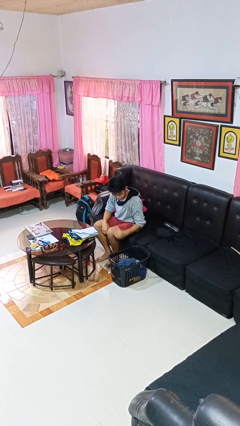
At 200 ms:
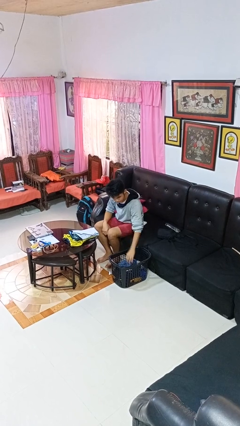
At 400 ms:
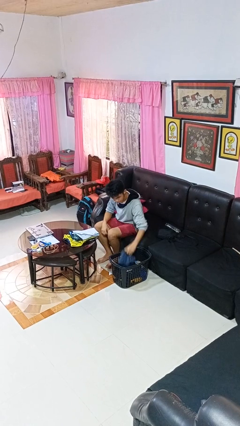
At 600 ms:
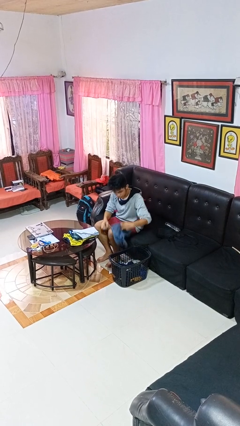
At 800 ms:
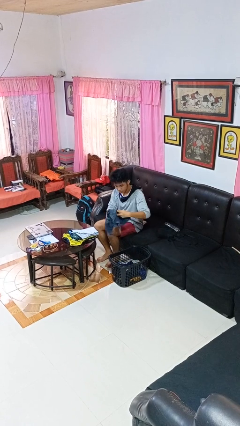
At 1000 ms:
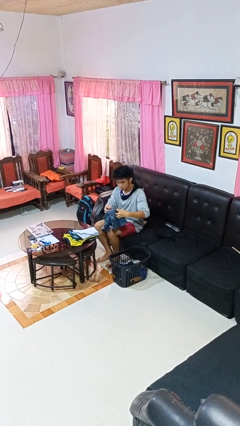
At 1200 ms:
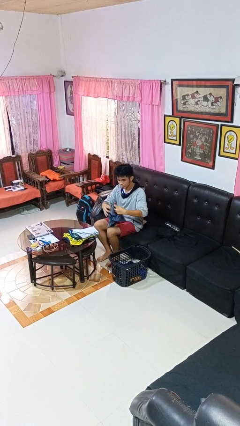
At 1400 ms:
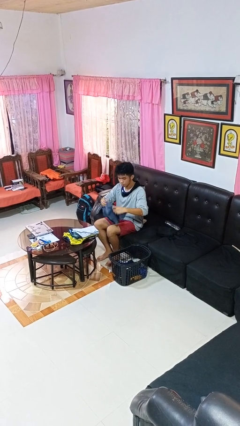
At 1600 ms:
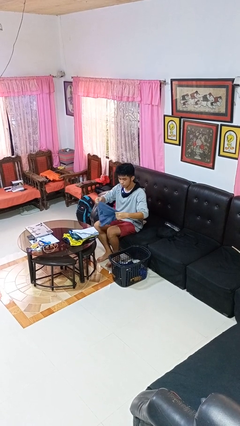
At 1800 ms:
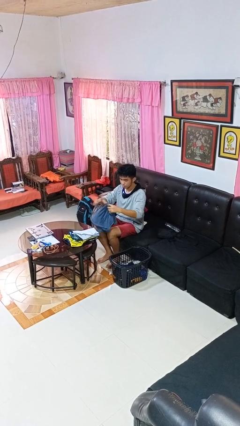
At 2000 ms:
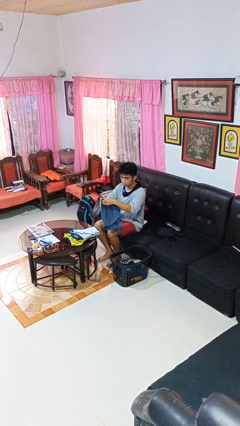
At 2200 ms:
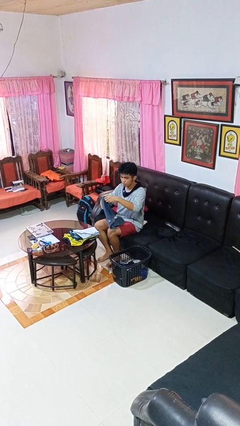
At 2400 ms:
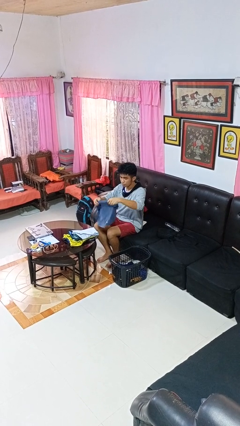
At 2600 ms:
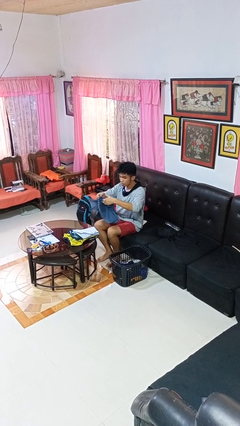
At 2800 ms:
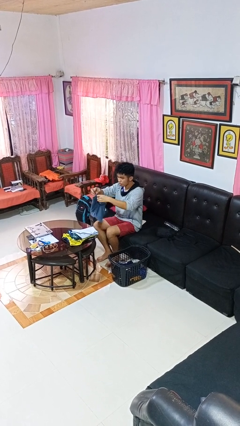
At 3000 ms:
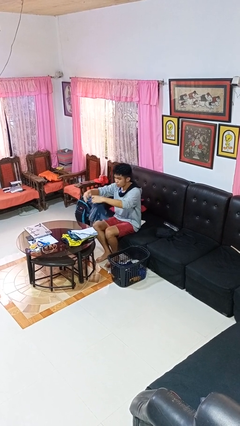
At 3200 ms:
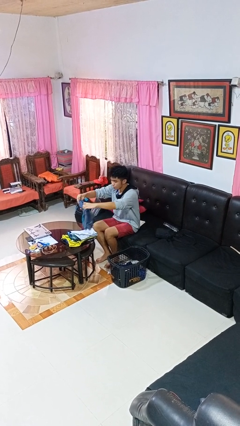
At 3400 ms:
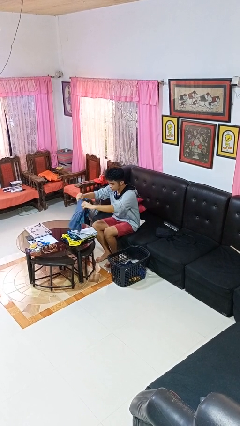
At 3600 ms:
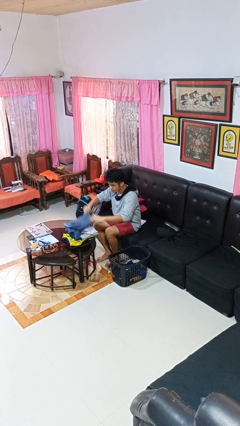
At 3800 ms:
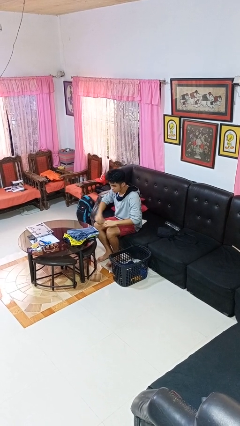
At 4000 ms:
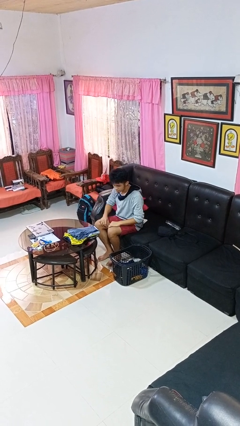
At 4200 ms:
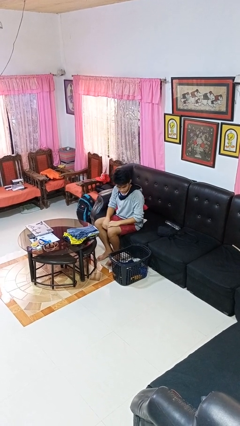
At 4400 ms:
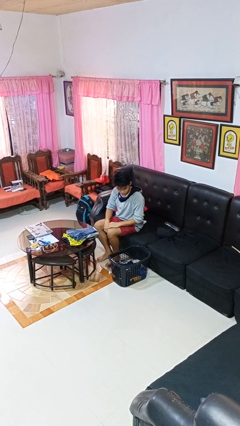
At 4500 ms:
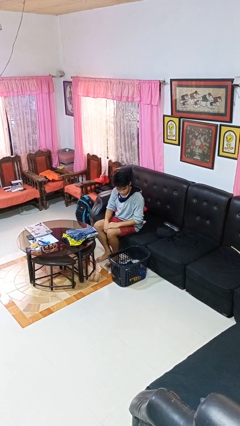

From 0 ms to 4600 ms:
person folds shirt

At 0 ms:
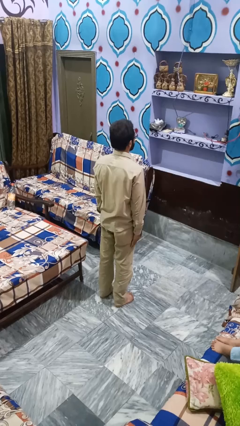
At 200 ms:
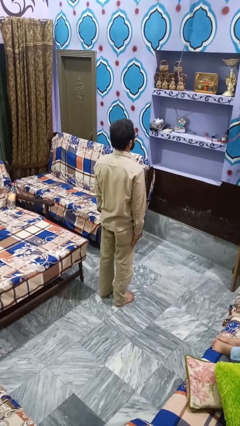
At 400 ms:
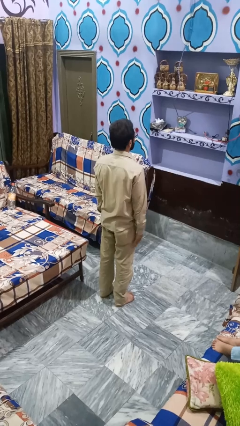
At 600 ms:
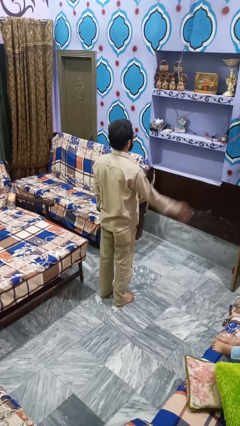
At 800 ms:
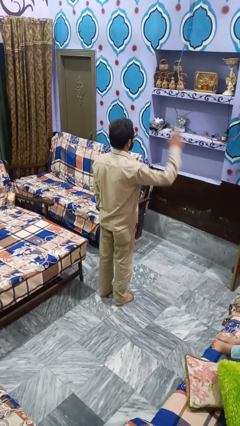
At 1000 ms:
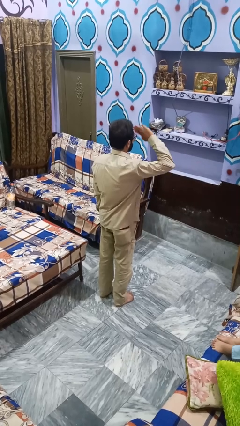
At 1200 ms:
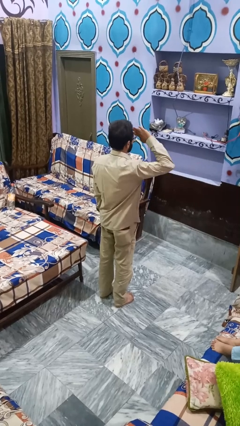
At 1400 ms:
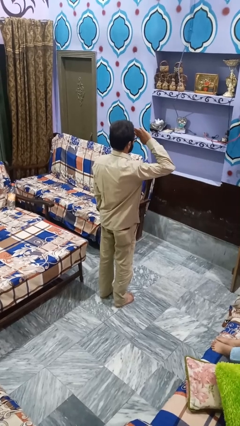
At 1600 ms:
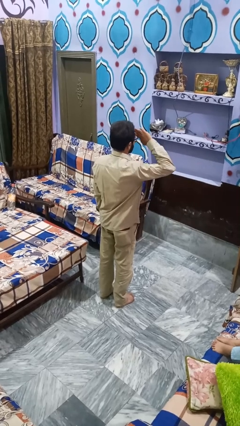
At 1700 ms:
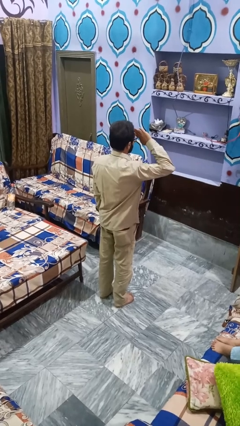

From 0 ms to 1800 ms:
person salutes

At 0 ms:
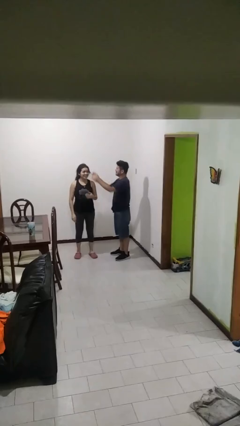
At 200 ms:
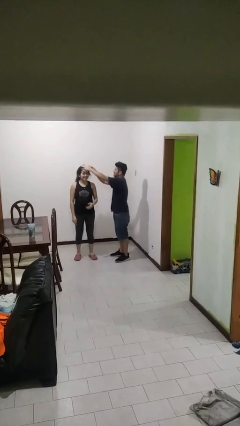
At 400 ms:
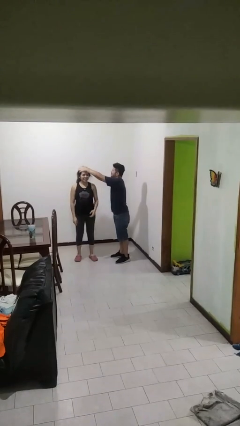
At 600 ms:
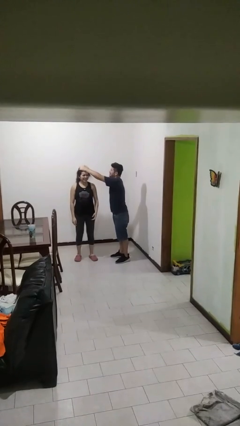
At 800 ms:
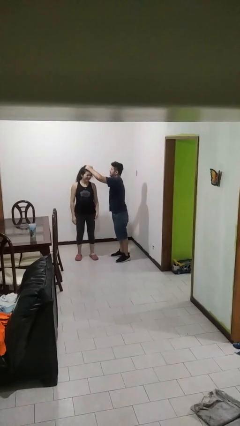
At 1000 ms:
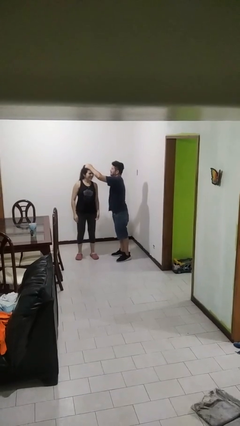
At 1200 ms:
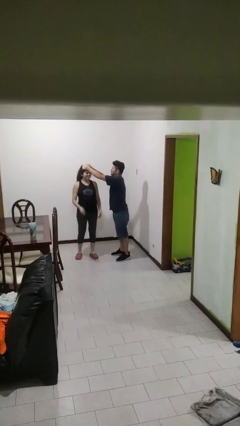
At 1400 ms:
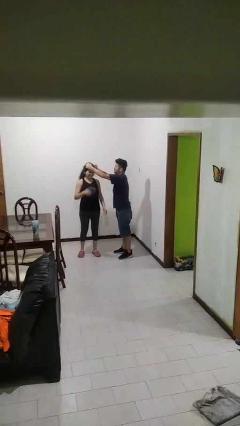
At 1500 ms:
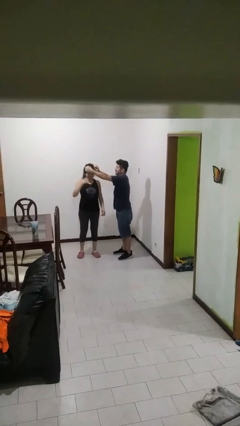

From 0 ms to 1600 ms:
person grabs person by hair

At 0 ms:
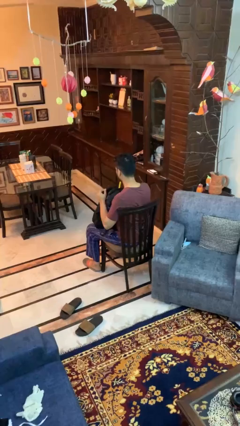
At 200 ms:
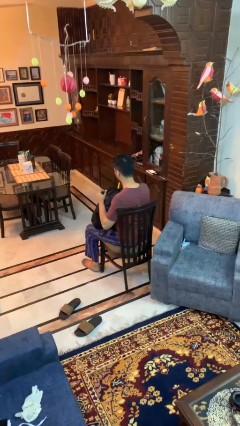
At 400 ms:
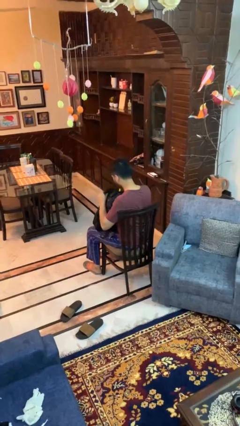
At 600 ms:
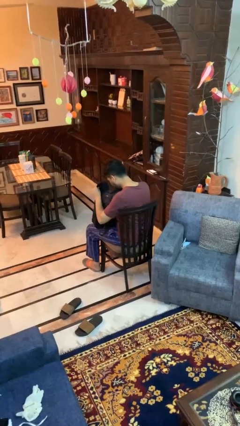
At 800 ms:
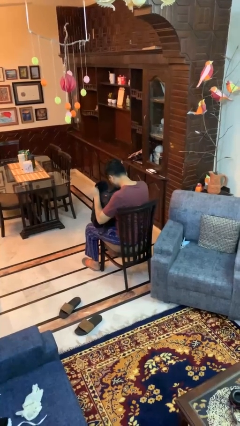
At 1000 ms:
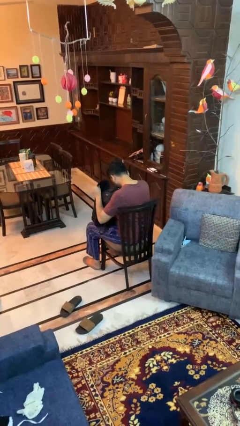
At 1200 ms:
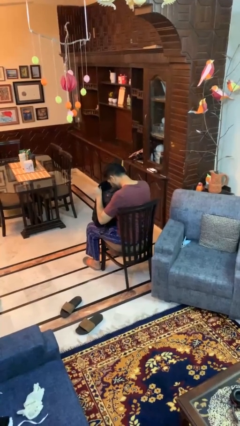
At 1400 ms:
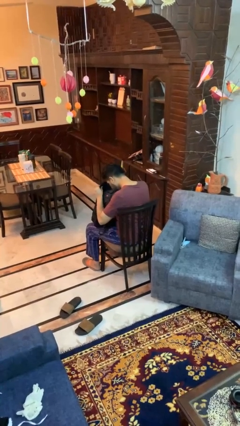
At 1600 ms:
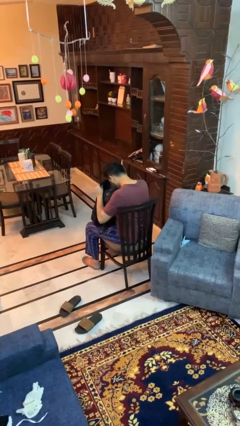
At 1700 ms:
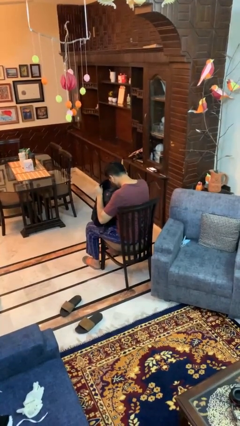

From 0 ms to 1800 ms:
person searches in backpack

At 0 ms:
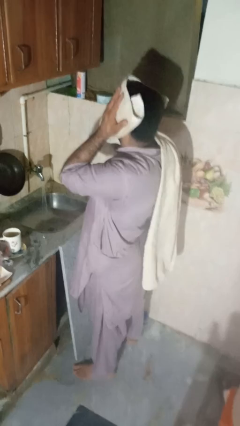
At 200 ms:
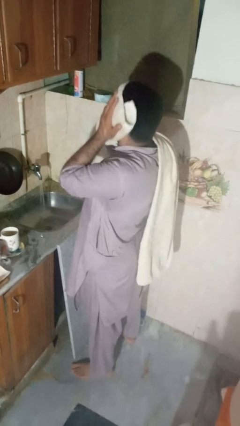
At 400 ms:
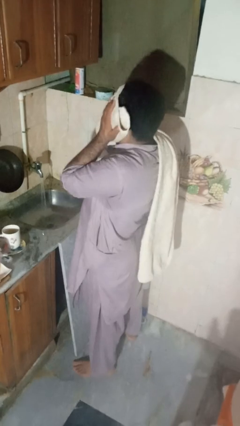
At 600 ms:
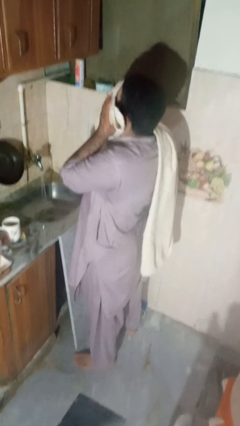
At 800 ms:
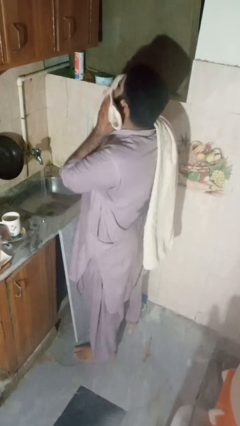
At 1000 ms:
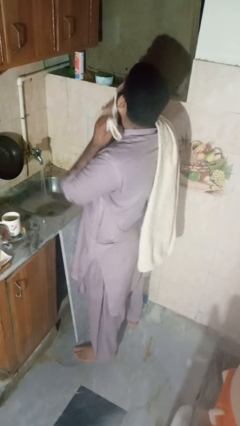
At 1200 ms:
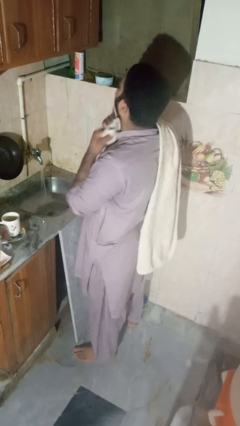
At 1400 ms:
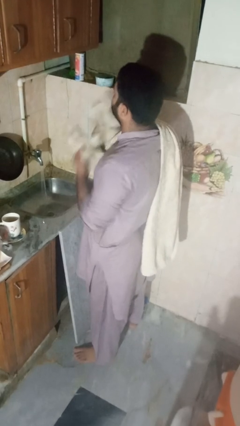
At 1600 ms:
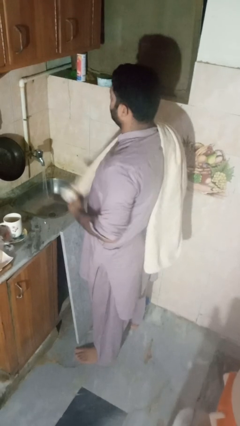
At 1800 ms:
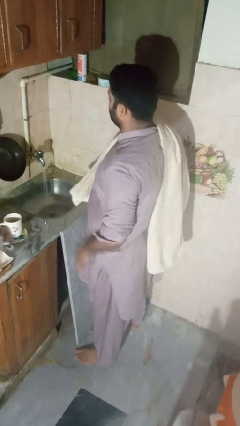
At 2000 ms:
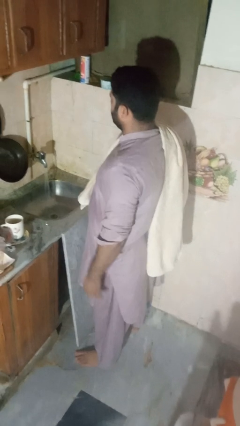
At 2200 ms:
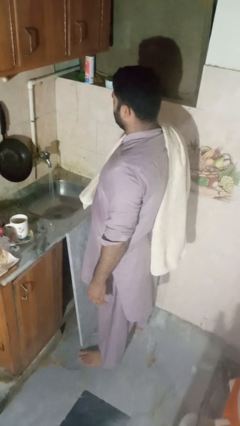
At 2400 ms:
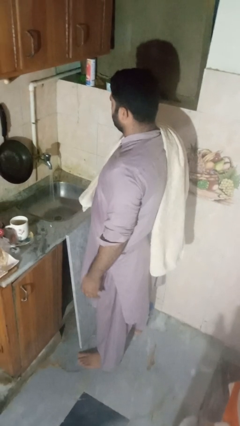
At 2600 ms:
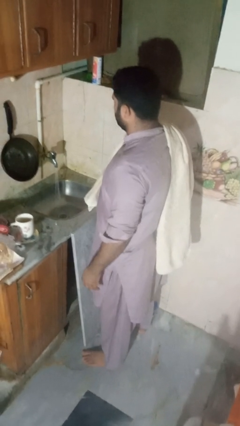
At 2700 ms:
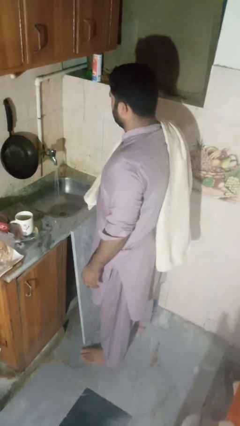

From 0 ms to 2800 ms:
person dries face with towel

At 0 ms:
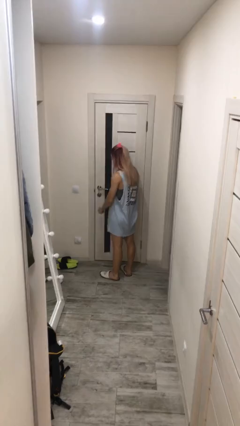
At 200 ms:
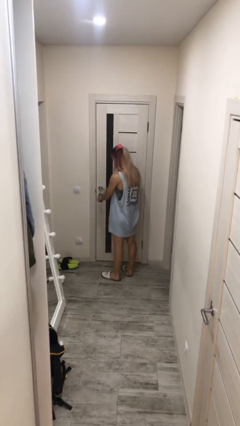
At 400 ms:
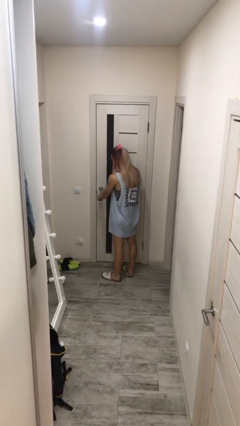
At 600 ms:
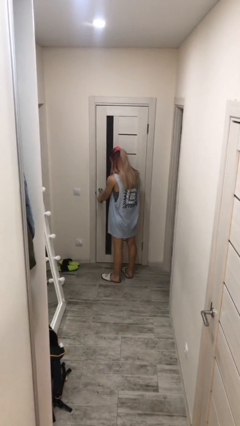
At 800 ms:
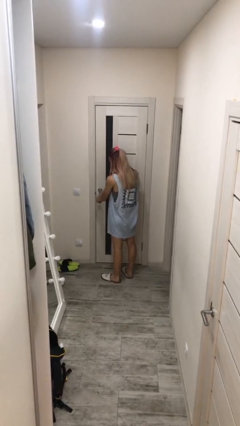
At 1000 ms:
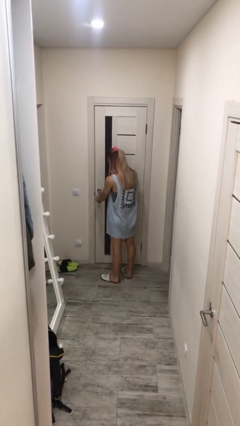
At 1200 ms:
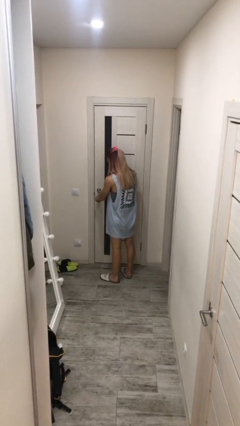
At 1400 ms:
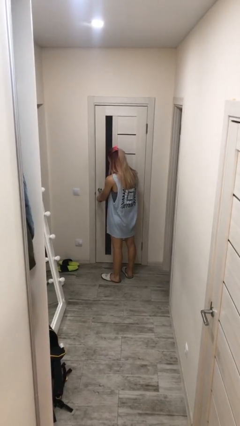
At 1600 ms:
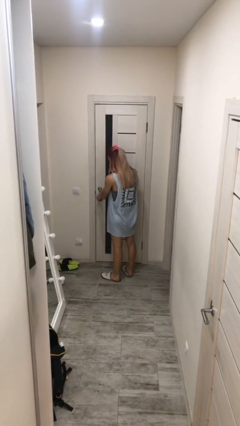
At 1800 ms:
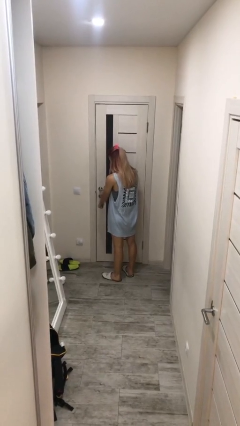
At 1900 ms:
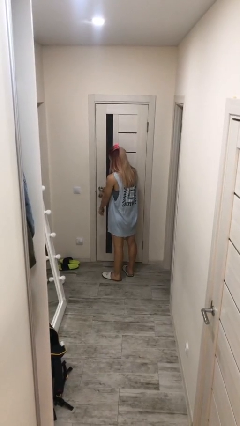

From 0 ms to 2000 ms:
person unlocks door with keys

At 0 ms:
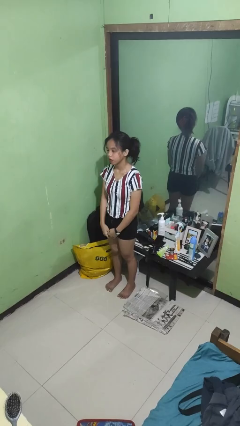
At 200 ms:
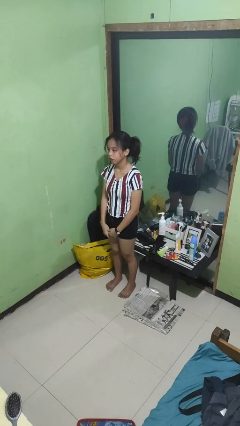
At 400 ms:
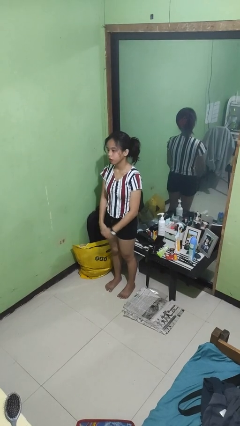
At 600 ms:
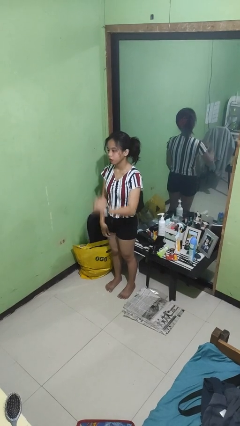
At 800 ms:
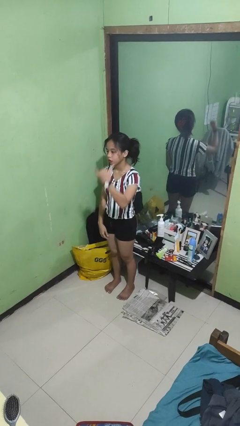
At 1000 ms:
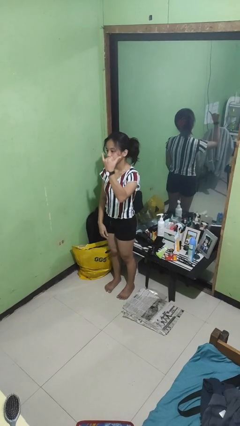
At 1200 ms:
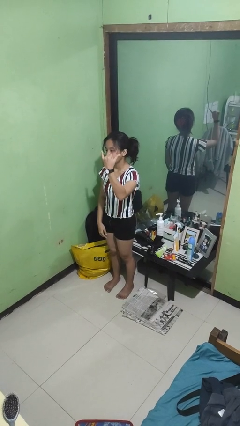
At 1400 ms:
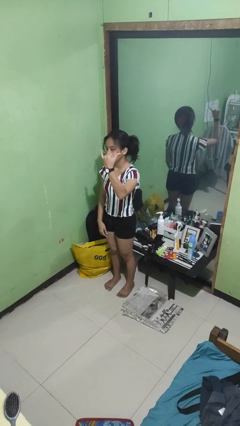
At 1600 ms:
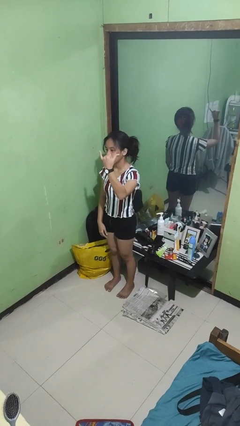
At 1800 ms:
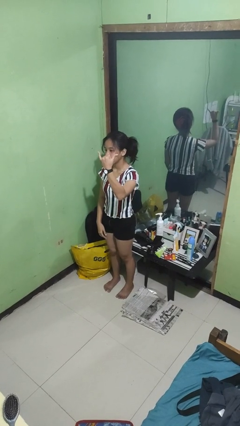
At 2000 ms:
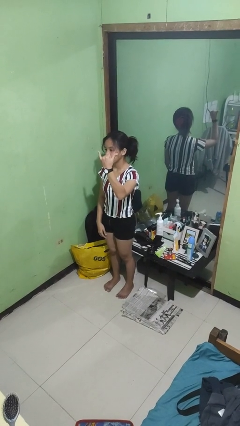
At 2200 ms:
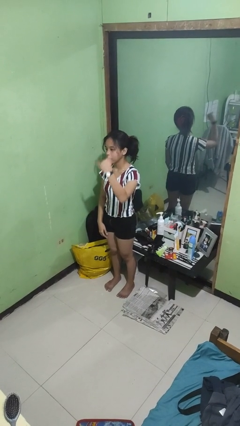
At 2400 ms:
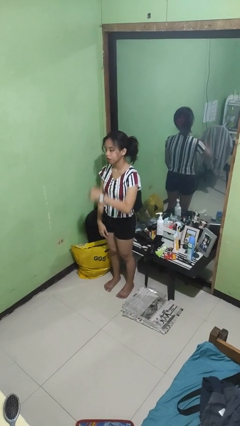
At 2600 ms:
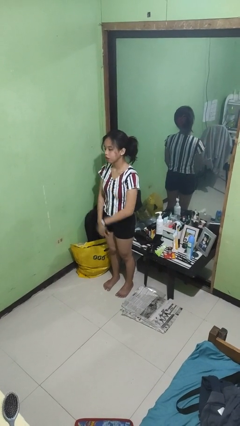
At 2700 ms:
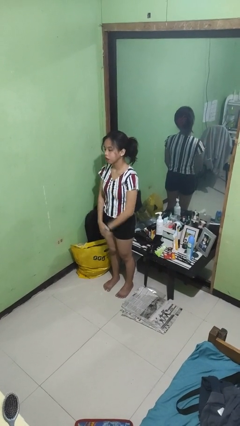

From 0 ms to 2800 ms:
person gestures hang loose
